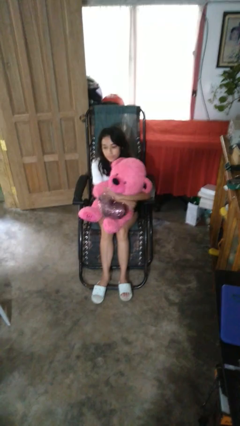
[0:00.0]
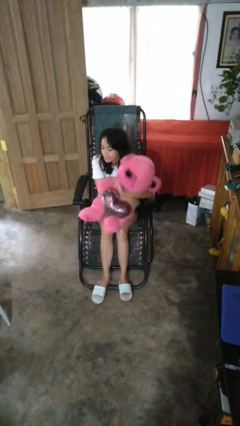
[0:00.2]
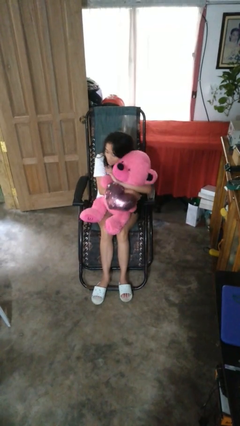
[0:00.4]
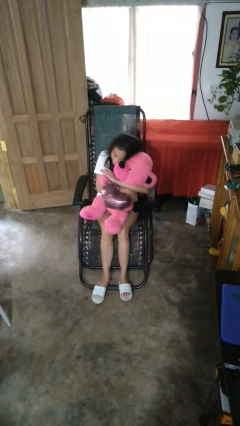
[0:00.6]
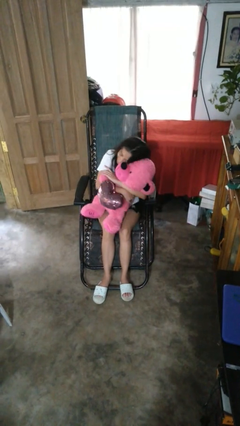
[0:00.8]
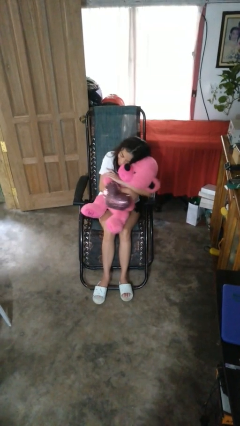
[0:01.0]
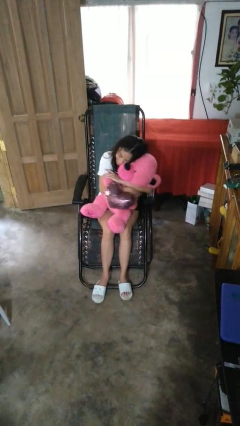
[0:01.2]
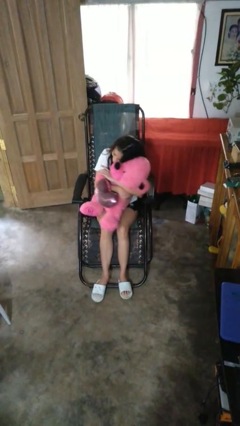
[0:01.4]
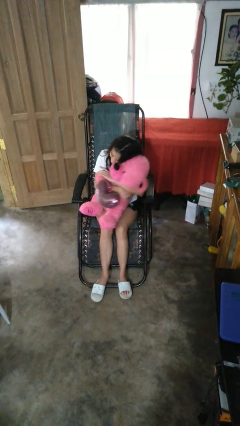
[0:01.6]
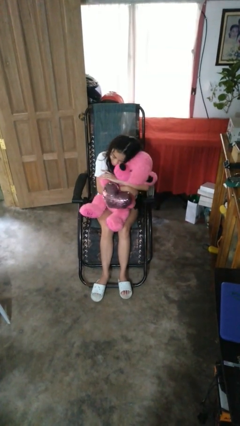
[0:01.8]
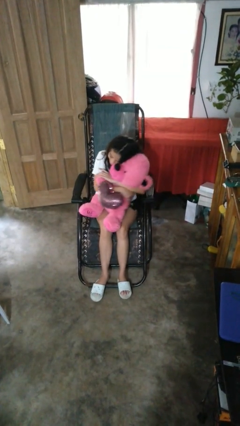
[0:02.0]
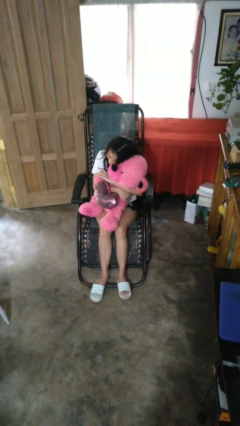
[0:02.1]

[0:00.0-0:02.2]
person hugs stuffed animal

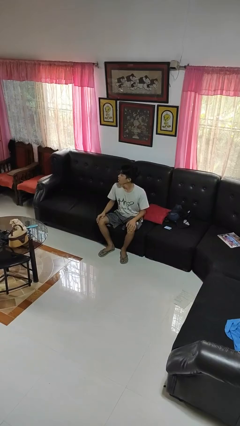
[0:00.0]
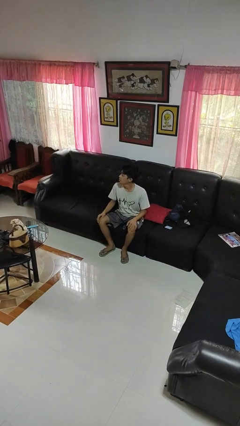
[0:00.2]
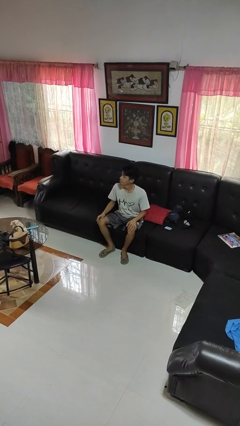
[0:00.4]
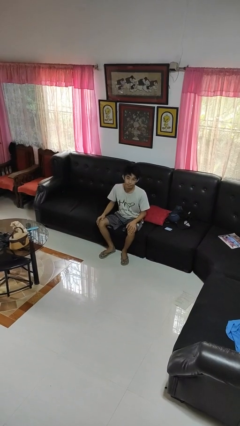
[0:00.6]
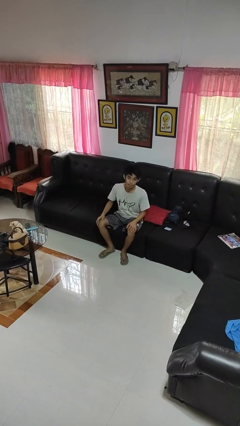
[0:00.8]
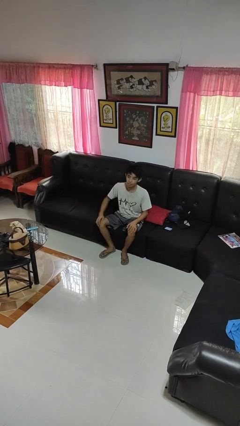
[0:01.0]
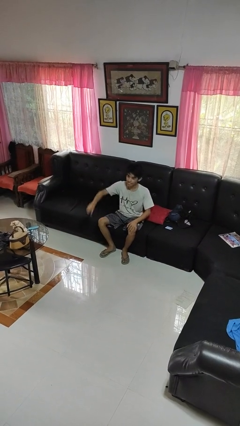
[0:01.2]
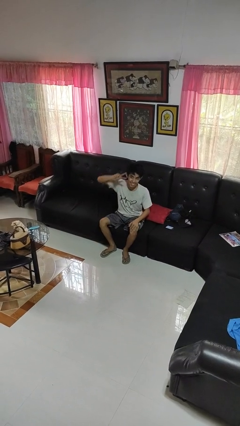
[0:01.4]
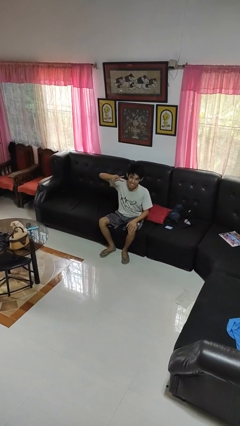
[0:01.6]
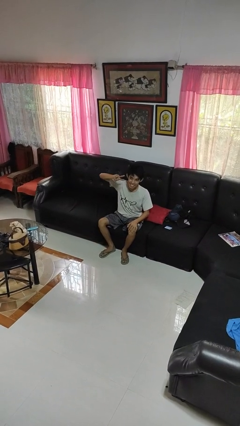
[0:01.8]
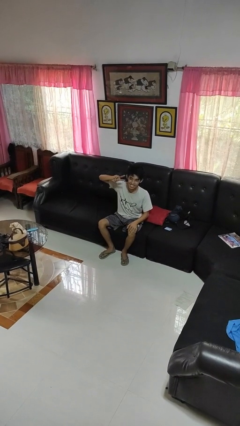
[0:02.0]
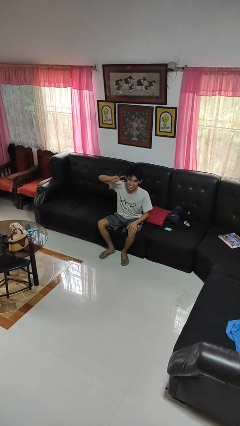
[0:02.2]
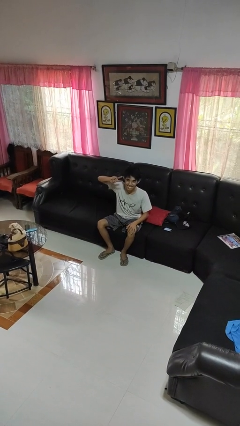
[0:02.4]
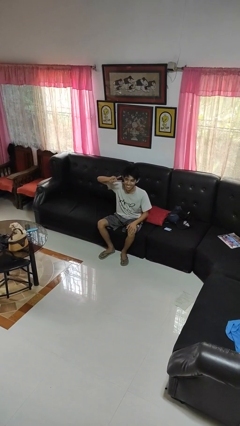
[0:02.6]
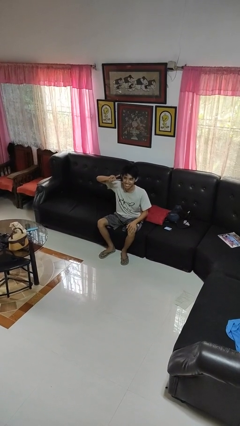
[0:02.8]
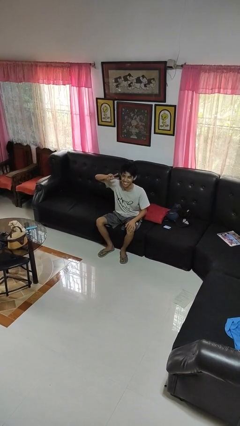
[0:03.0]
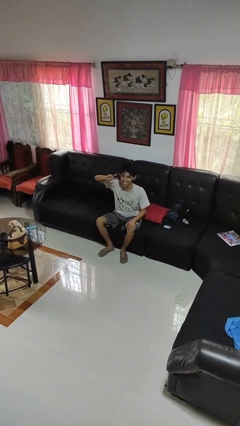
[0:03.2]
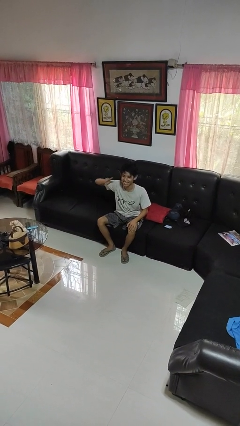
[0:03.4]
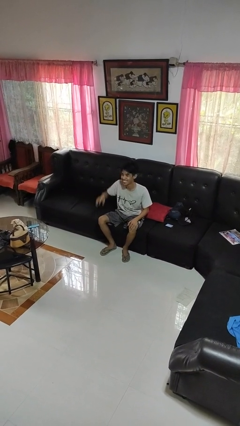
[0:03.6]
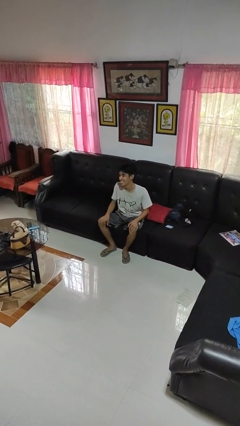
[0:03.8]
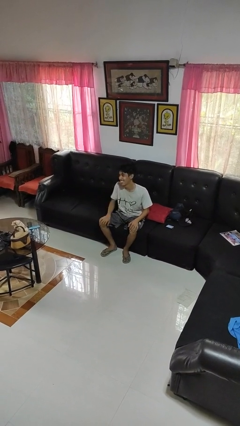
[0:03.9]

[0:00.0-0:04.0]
person gestures peace

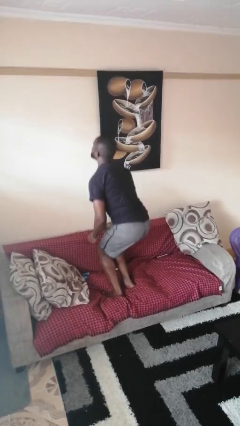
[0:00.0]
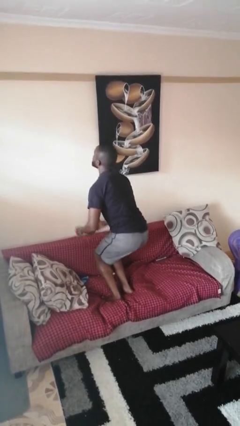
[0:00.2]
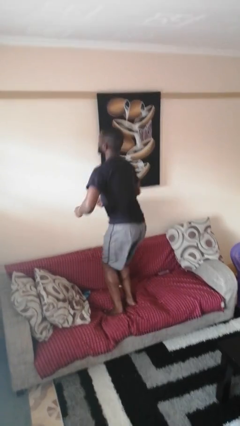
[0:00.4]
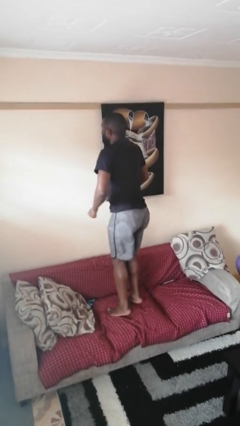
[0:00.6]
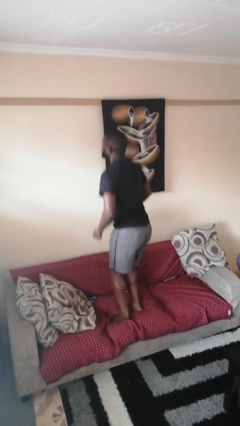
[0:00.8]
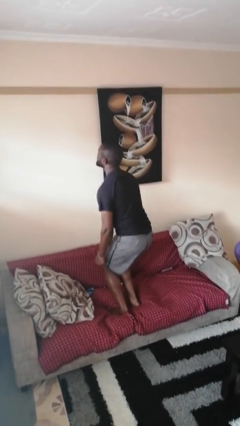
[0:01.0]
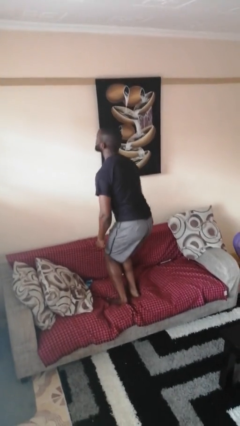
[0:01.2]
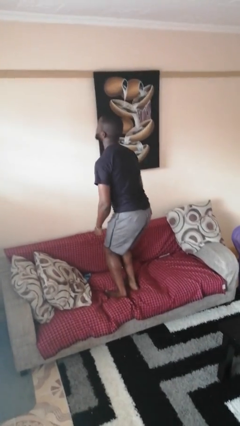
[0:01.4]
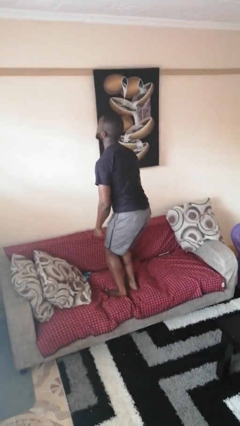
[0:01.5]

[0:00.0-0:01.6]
person jumps on couch

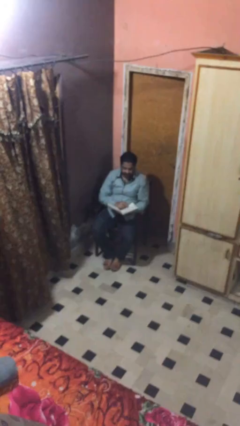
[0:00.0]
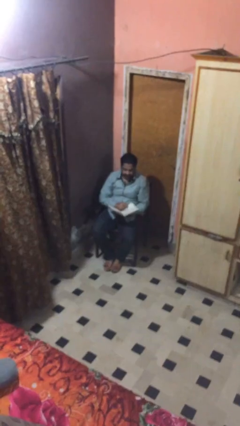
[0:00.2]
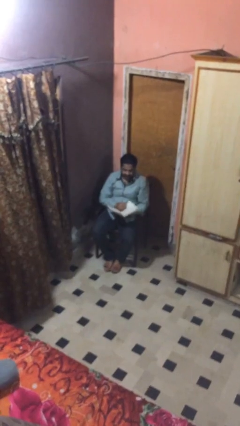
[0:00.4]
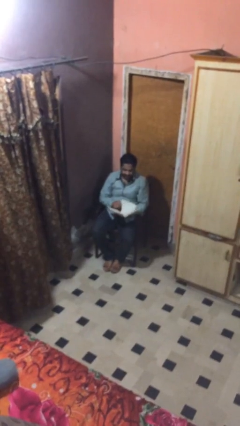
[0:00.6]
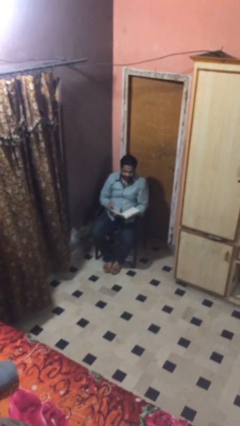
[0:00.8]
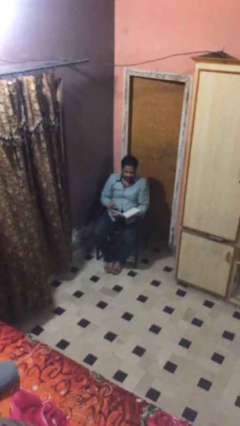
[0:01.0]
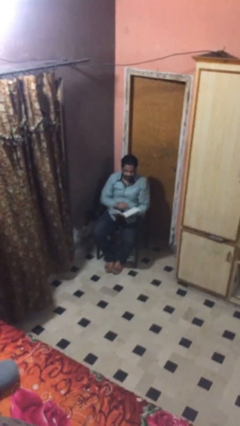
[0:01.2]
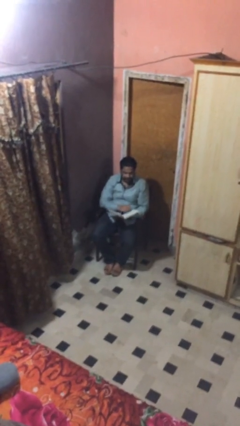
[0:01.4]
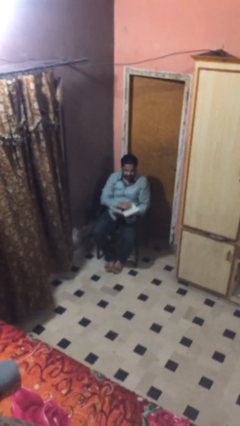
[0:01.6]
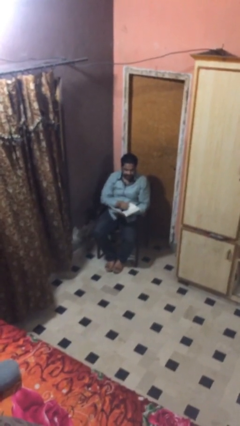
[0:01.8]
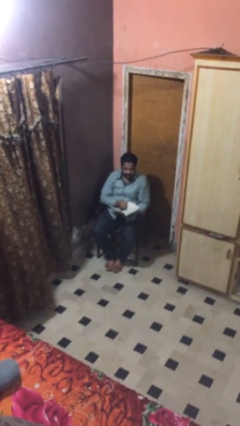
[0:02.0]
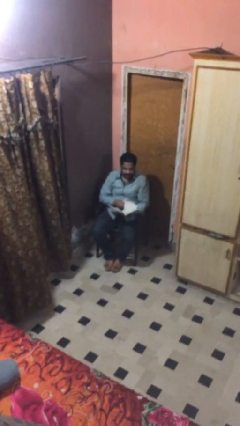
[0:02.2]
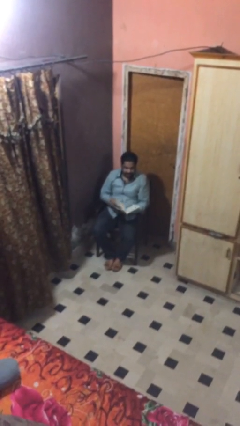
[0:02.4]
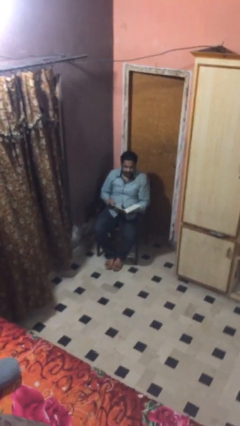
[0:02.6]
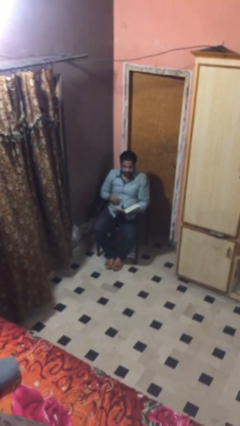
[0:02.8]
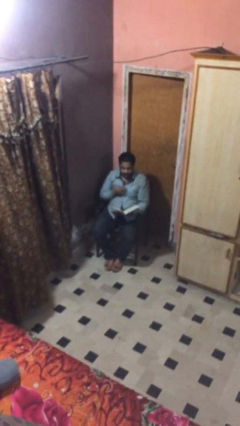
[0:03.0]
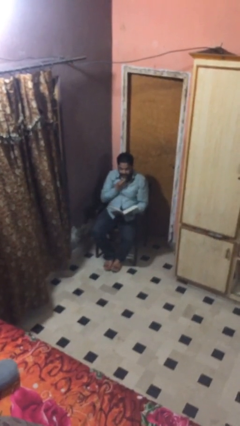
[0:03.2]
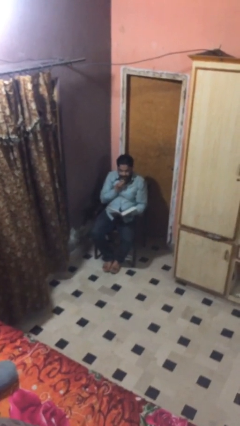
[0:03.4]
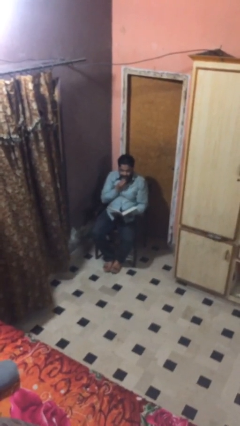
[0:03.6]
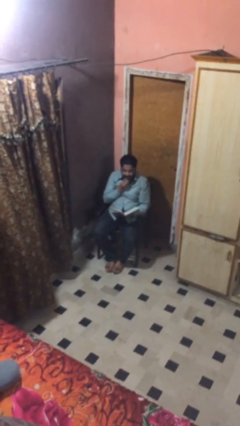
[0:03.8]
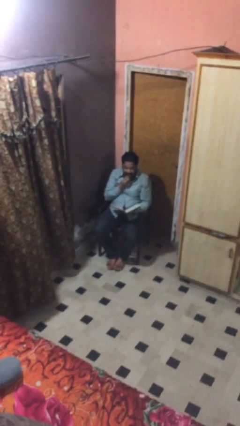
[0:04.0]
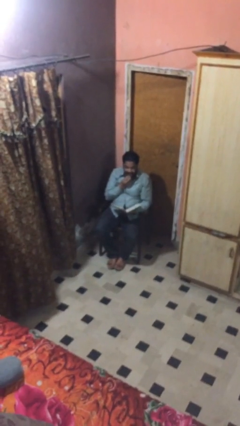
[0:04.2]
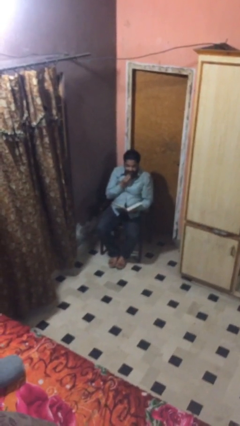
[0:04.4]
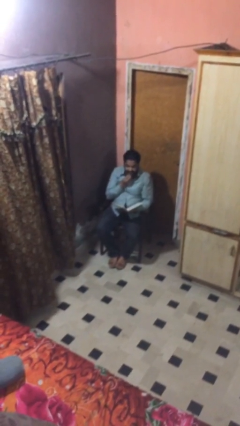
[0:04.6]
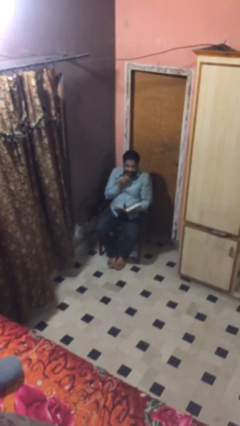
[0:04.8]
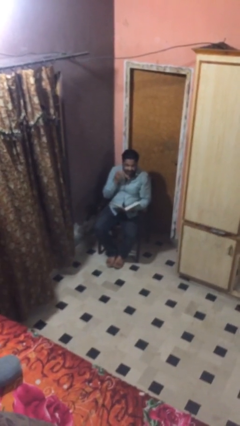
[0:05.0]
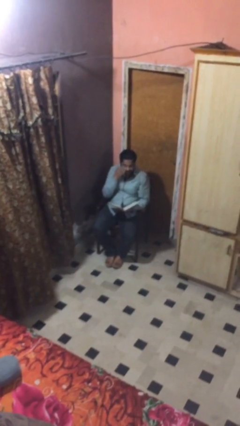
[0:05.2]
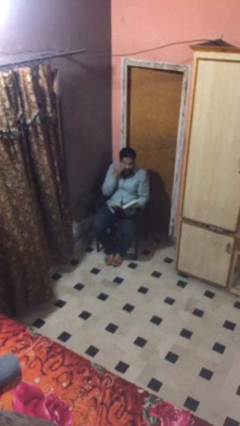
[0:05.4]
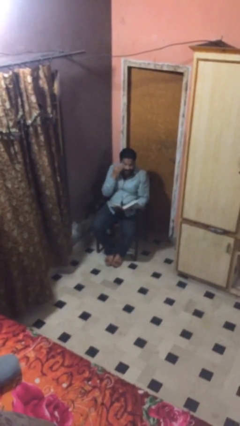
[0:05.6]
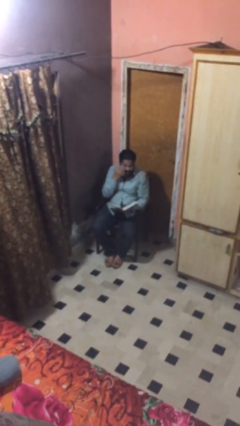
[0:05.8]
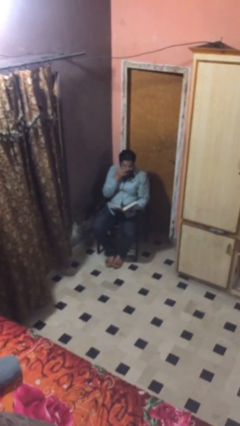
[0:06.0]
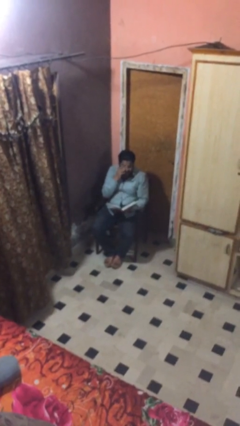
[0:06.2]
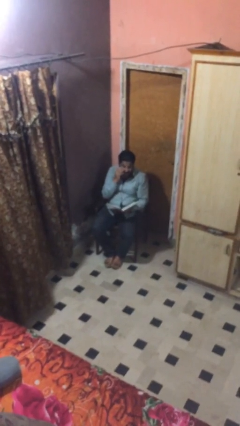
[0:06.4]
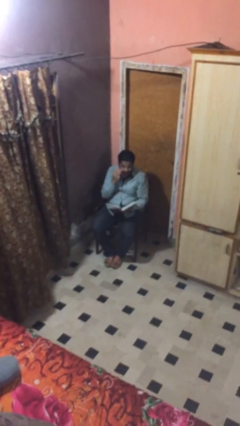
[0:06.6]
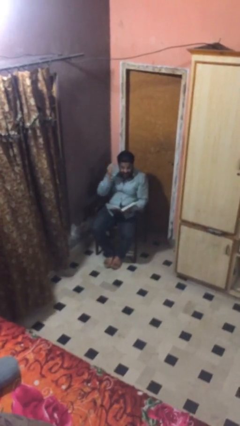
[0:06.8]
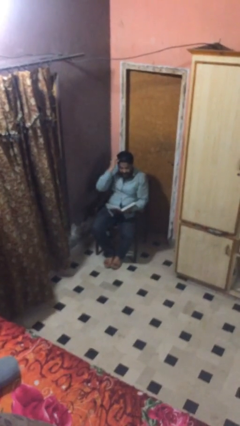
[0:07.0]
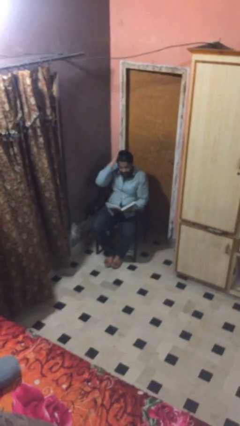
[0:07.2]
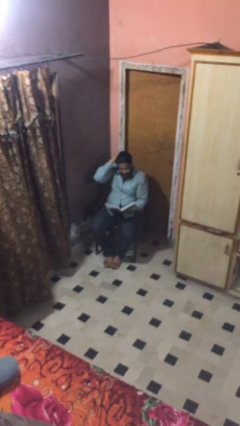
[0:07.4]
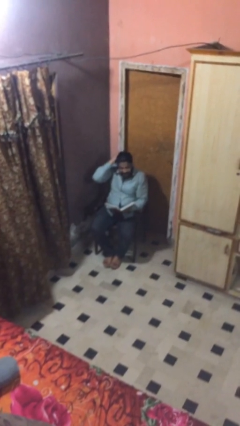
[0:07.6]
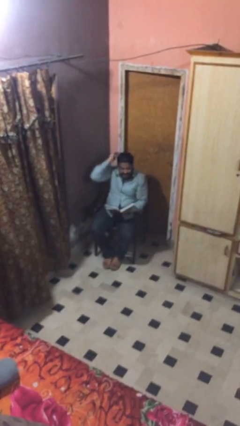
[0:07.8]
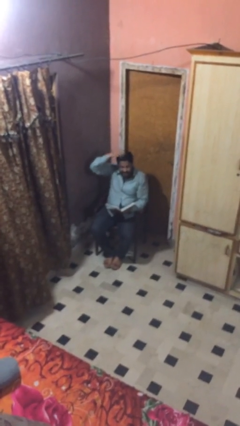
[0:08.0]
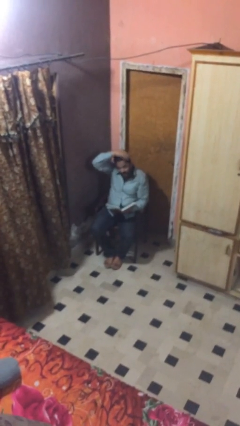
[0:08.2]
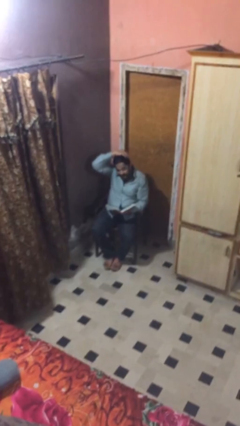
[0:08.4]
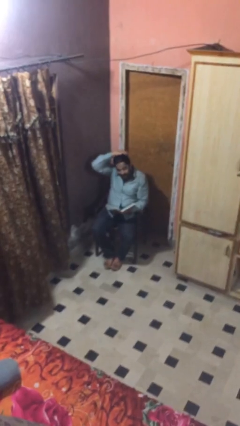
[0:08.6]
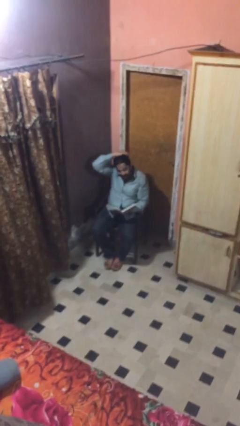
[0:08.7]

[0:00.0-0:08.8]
person reads document

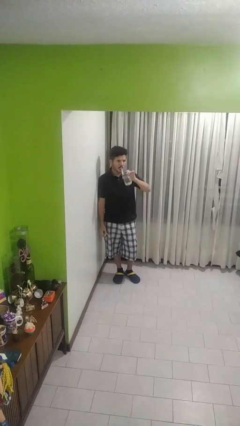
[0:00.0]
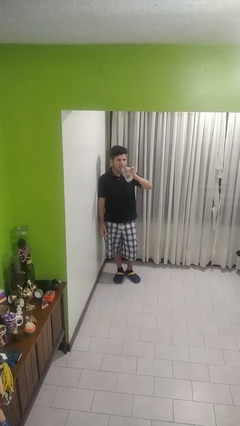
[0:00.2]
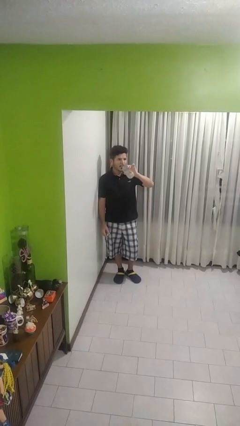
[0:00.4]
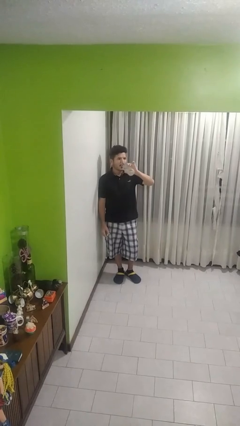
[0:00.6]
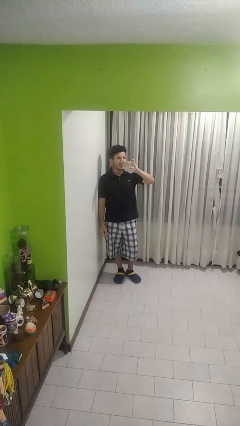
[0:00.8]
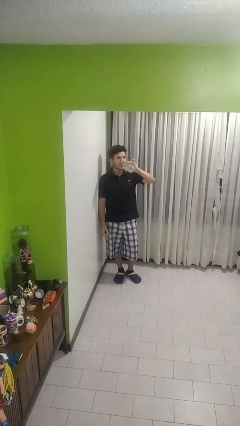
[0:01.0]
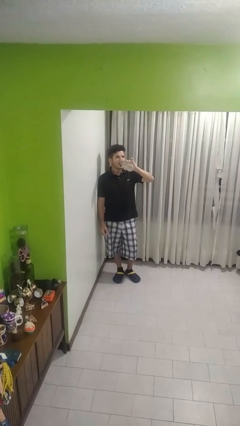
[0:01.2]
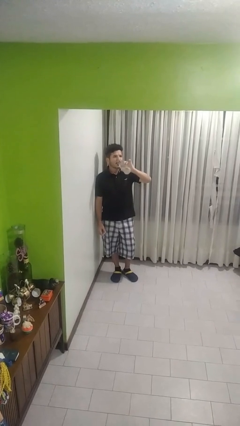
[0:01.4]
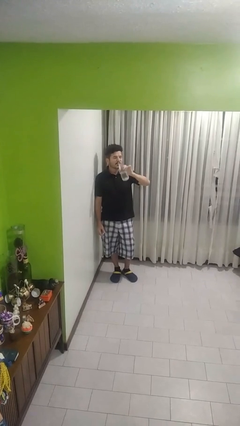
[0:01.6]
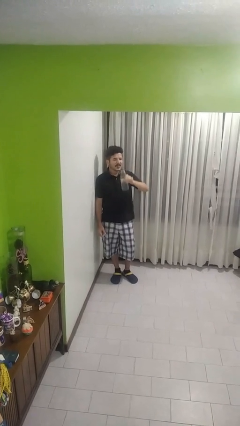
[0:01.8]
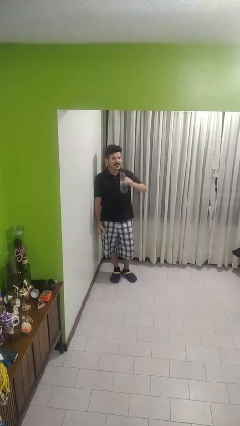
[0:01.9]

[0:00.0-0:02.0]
person drinks from bottle
